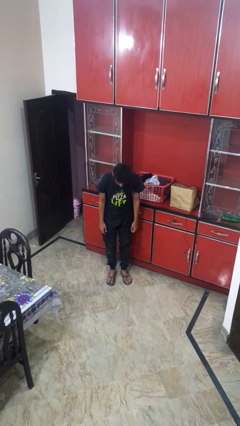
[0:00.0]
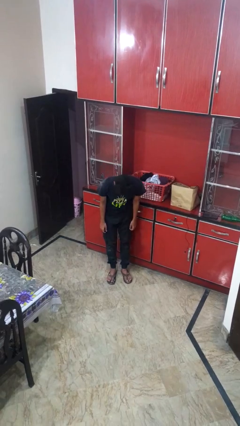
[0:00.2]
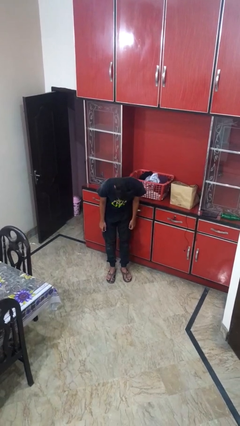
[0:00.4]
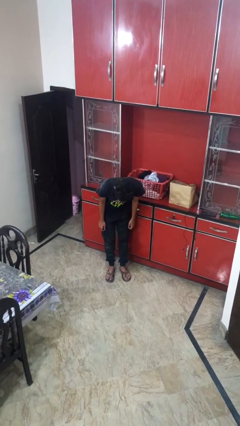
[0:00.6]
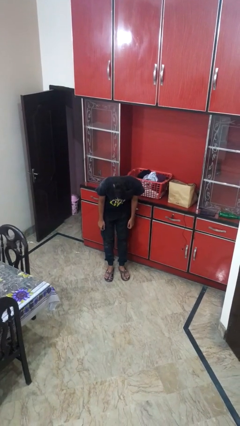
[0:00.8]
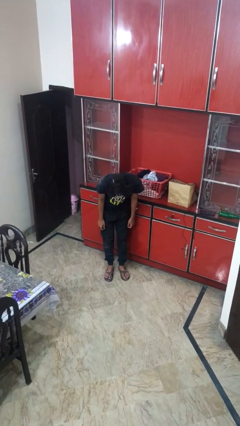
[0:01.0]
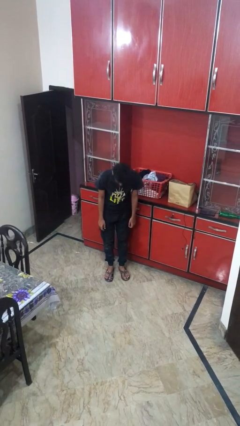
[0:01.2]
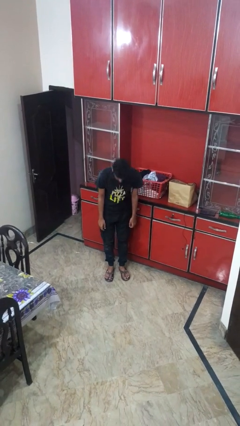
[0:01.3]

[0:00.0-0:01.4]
person bows

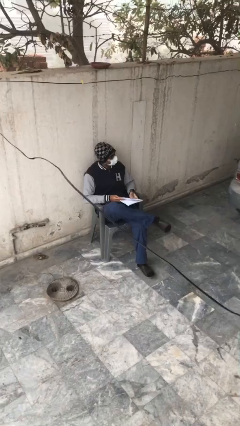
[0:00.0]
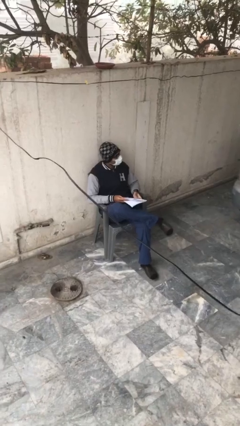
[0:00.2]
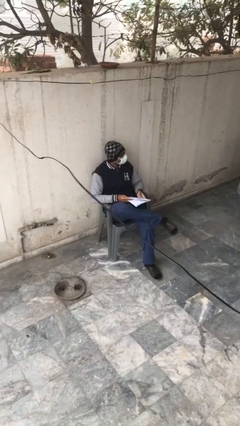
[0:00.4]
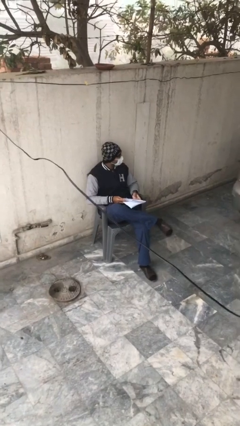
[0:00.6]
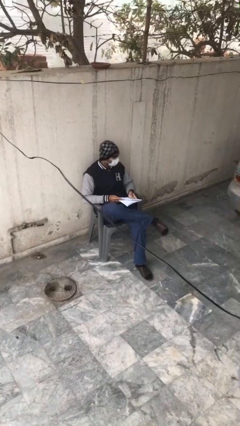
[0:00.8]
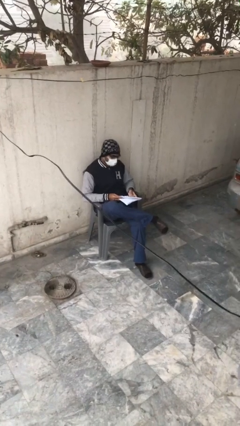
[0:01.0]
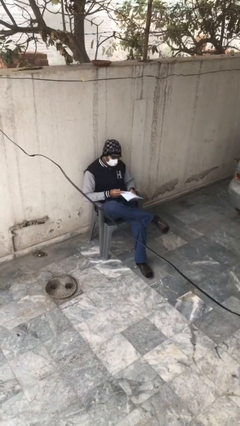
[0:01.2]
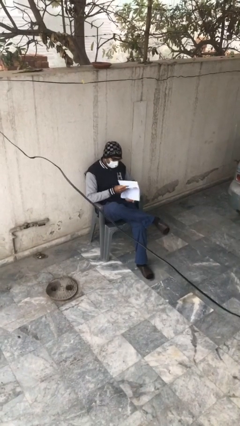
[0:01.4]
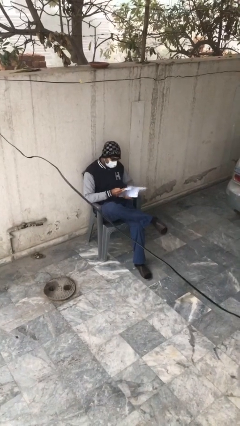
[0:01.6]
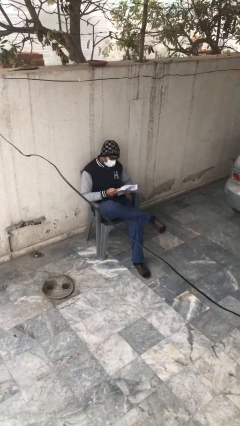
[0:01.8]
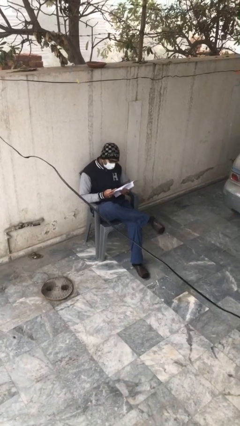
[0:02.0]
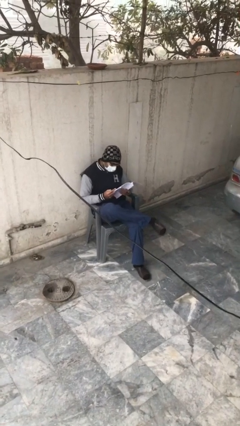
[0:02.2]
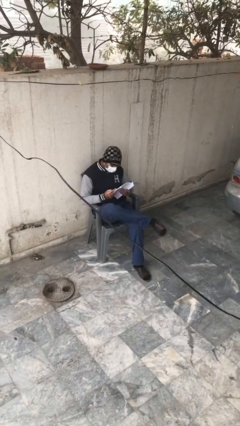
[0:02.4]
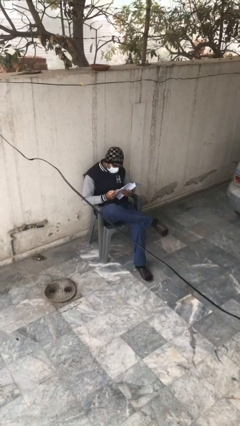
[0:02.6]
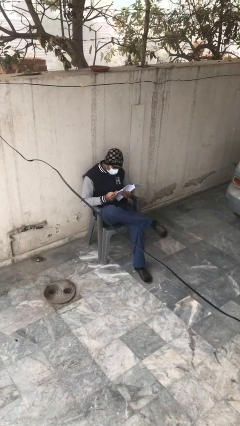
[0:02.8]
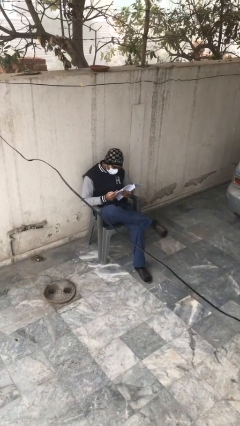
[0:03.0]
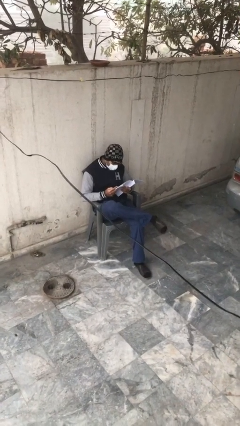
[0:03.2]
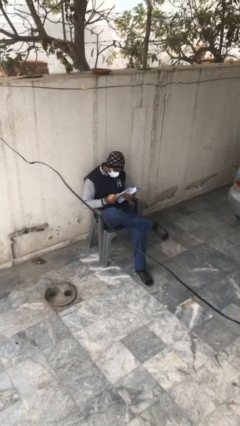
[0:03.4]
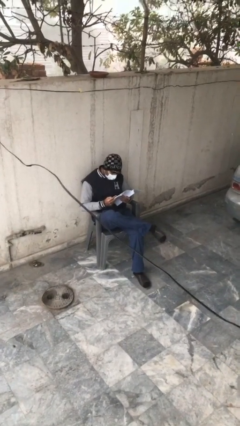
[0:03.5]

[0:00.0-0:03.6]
person reads document

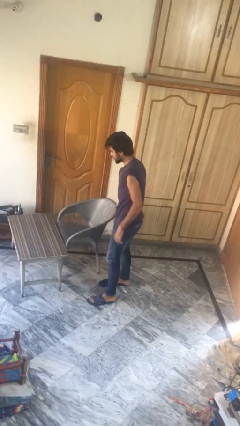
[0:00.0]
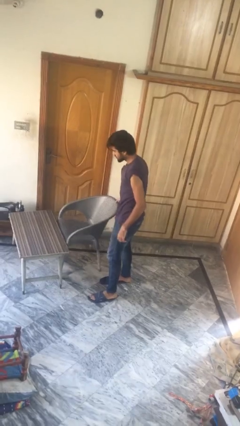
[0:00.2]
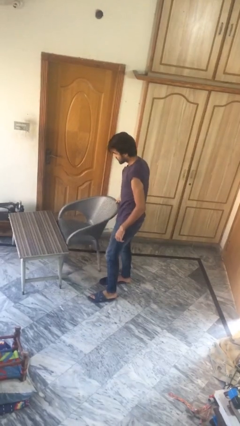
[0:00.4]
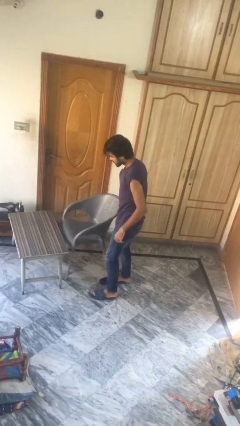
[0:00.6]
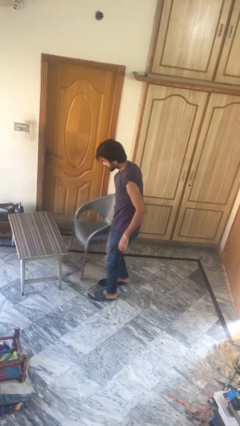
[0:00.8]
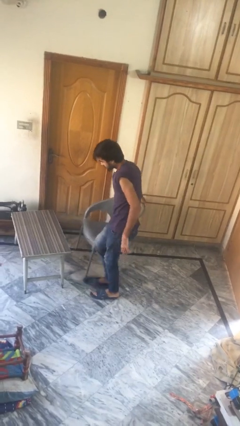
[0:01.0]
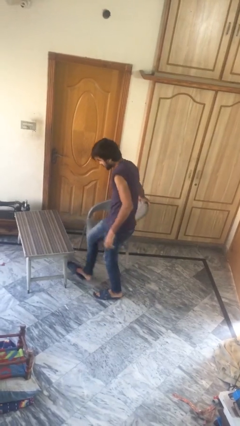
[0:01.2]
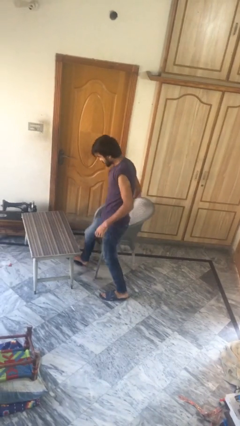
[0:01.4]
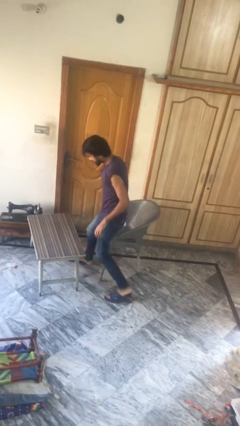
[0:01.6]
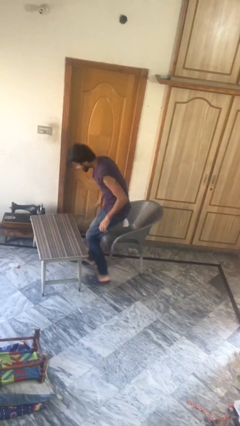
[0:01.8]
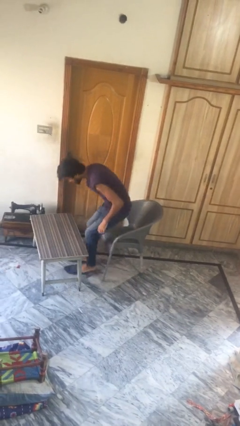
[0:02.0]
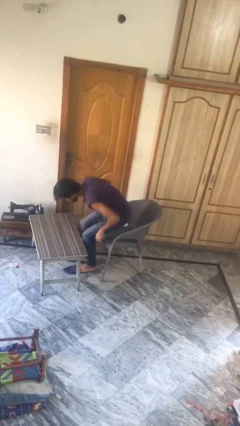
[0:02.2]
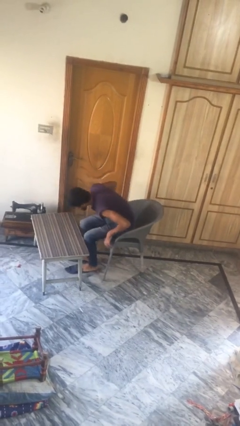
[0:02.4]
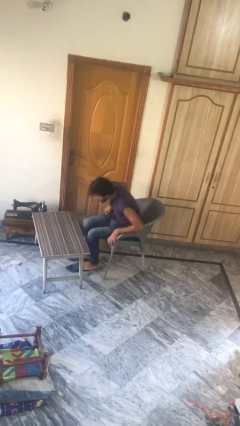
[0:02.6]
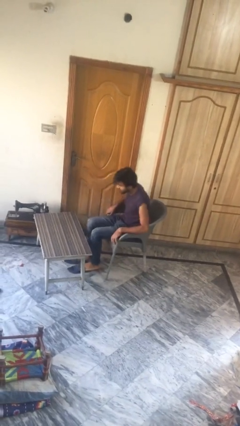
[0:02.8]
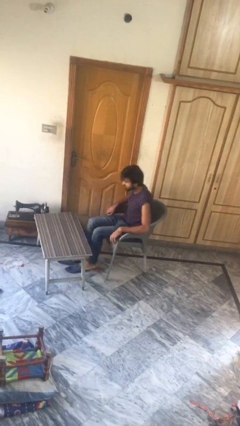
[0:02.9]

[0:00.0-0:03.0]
person sits down

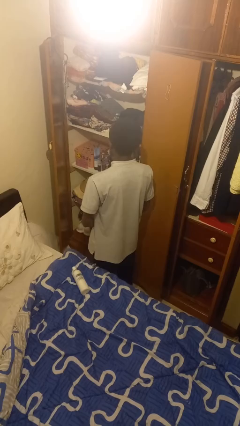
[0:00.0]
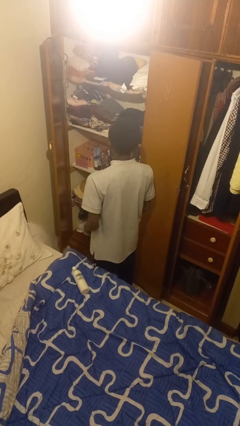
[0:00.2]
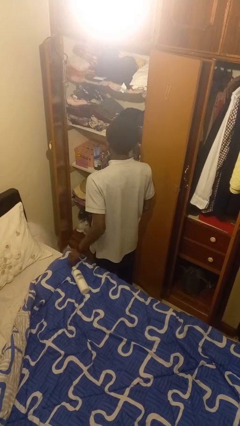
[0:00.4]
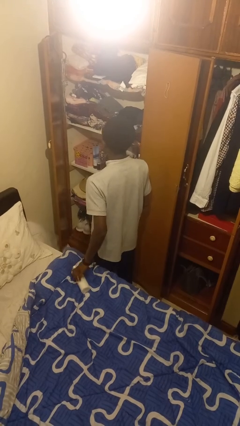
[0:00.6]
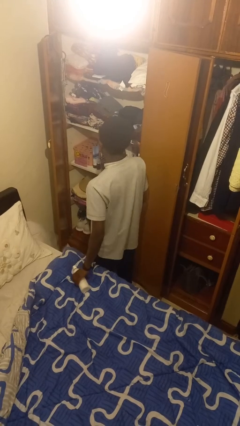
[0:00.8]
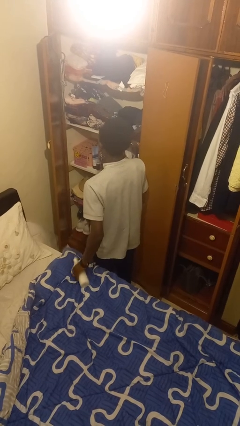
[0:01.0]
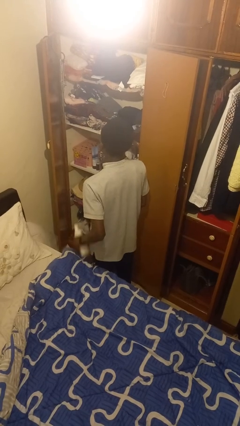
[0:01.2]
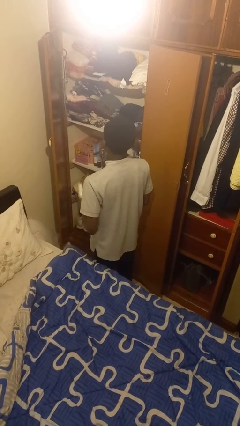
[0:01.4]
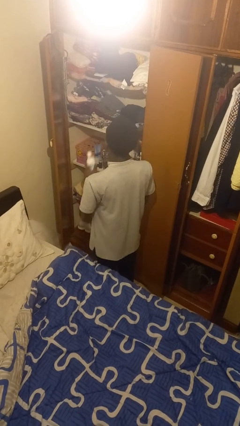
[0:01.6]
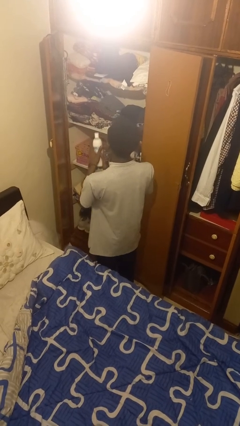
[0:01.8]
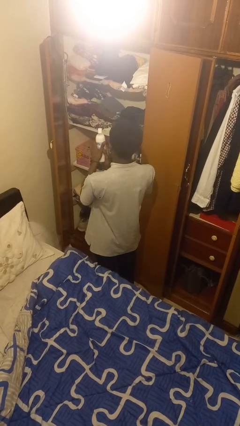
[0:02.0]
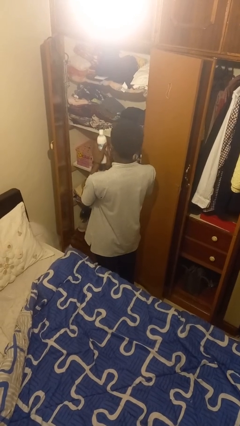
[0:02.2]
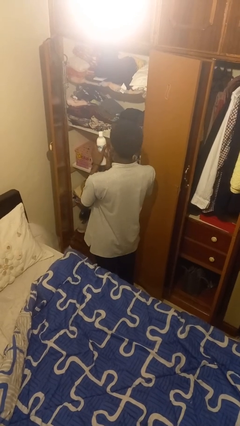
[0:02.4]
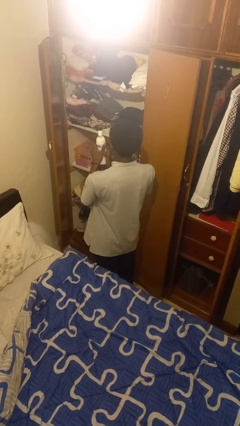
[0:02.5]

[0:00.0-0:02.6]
person picks up object from bed

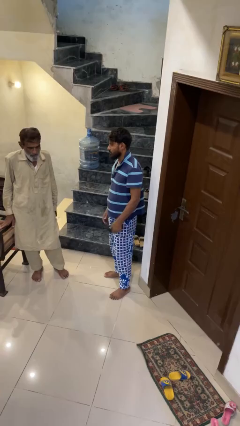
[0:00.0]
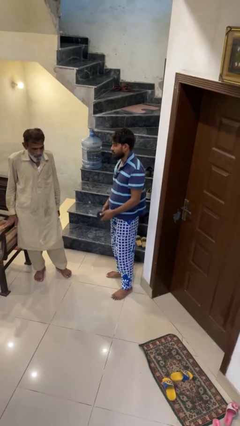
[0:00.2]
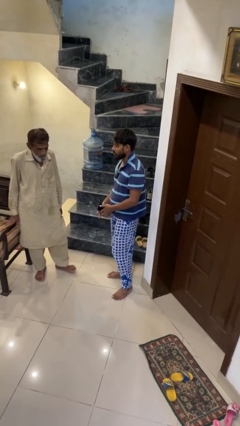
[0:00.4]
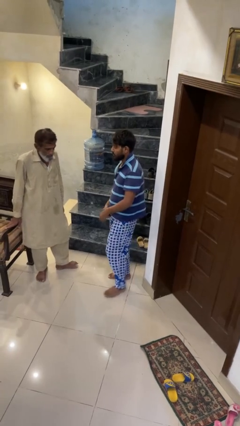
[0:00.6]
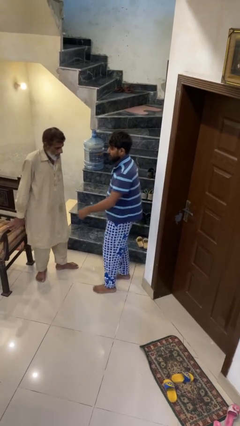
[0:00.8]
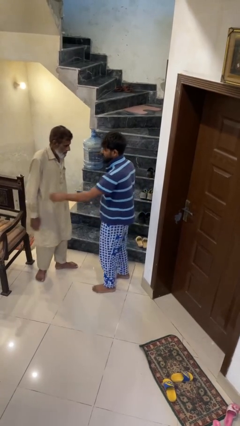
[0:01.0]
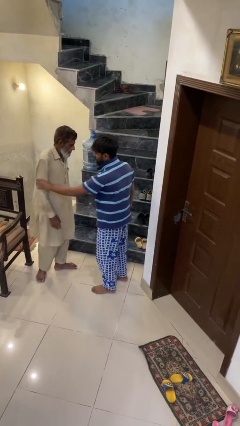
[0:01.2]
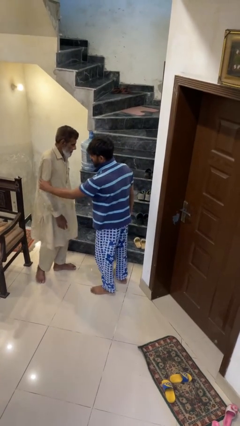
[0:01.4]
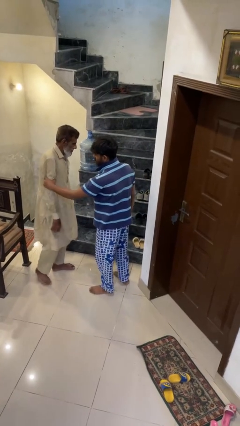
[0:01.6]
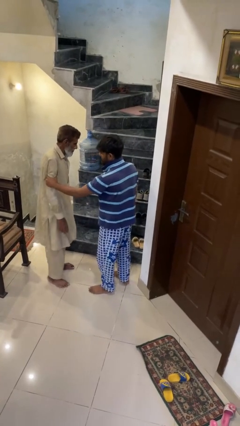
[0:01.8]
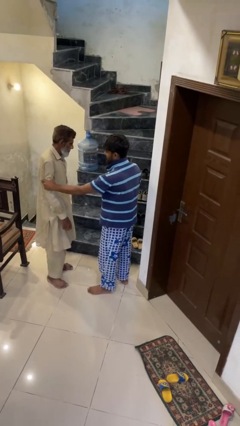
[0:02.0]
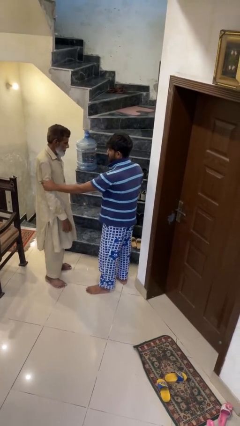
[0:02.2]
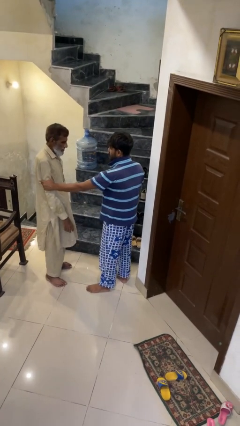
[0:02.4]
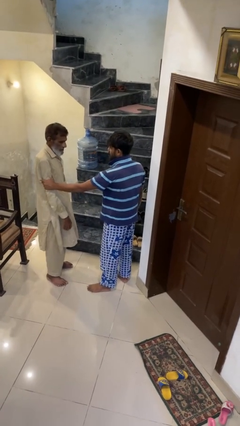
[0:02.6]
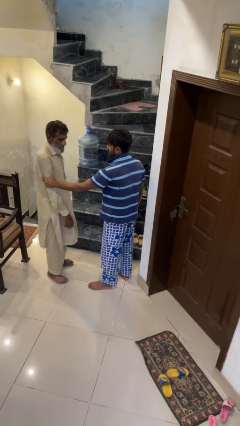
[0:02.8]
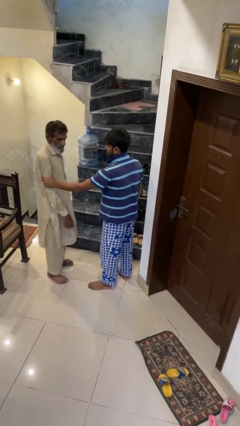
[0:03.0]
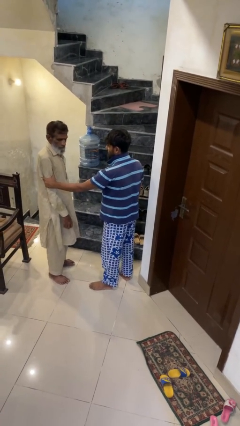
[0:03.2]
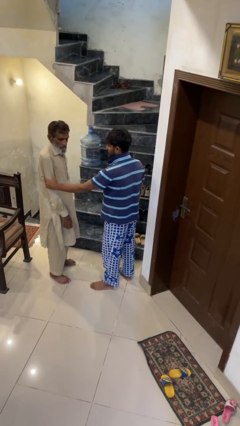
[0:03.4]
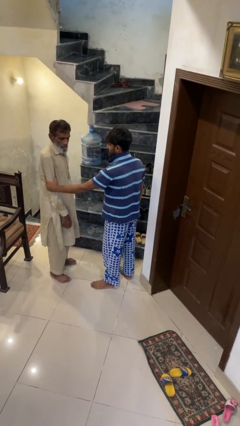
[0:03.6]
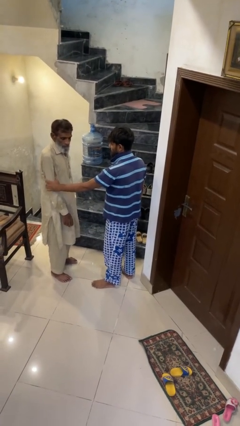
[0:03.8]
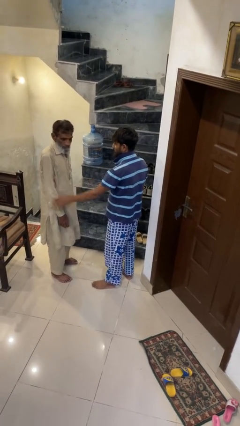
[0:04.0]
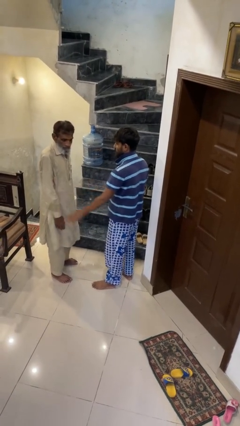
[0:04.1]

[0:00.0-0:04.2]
person grabs person by bicep

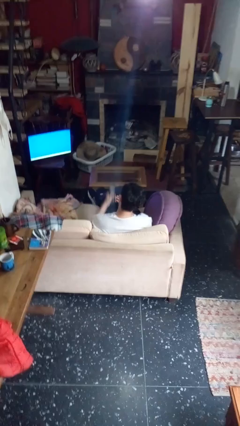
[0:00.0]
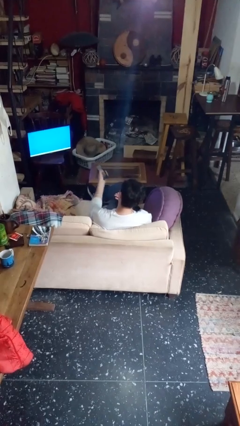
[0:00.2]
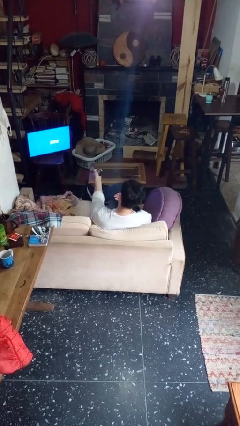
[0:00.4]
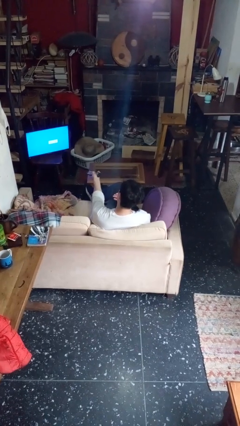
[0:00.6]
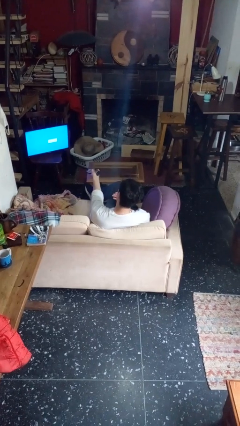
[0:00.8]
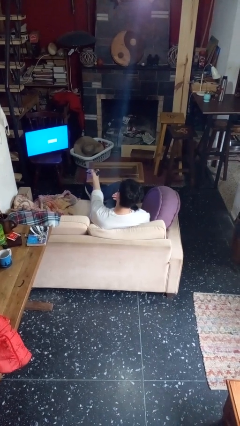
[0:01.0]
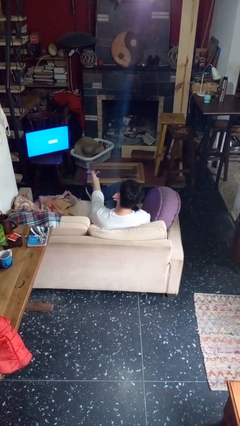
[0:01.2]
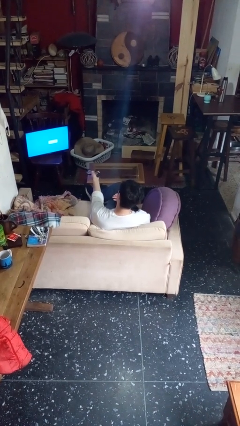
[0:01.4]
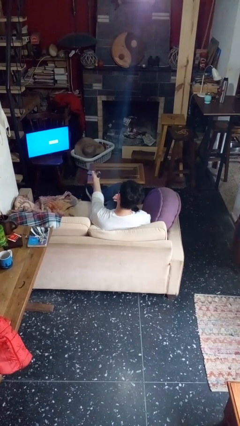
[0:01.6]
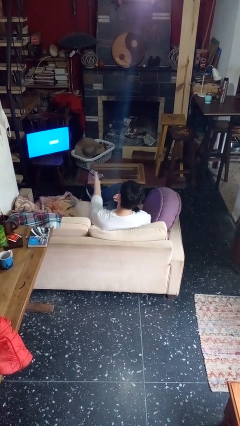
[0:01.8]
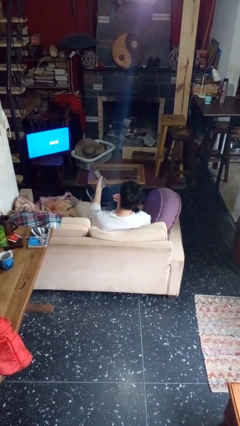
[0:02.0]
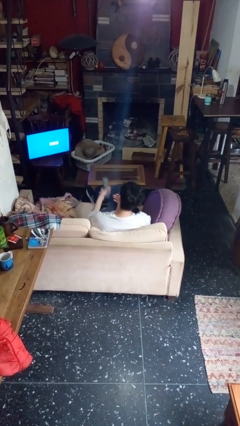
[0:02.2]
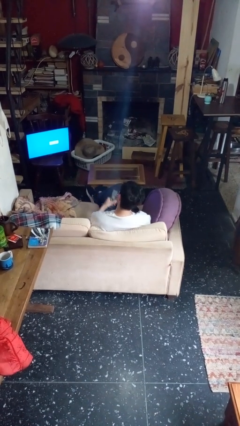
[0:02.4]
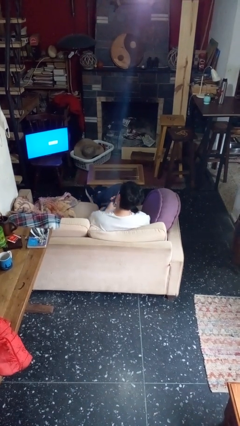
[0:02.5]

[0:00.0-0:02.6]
person uses television remote
